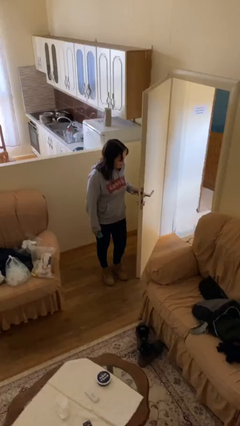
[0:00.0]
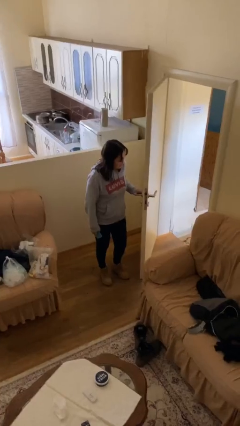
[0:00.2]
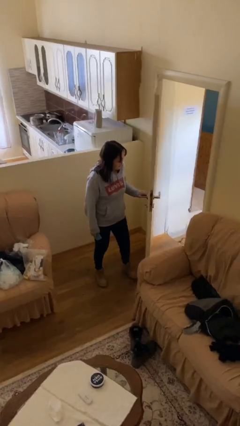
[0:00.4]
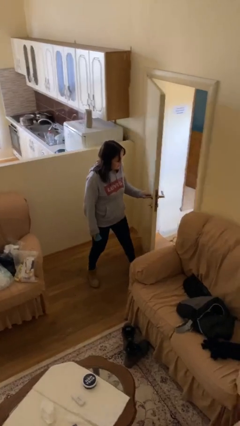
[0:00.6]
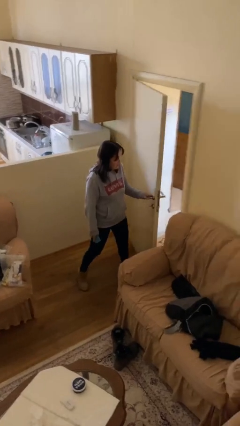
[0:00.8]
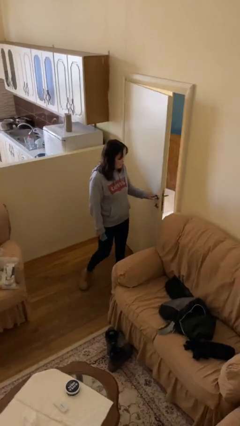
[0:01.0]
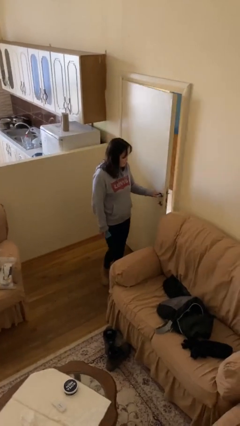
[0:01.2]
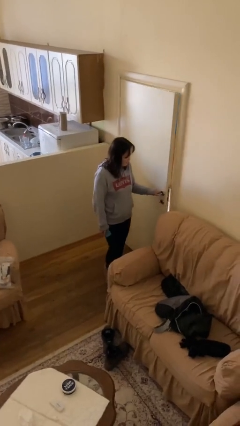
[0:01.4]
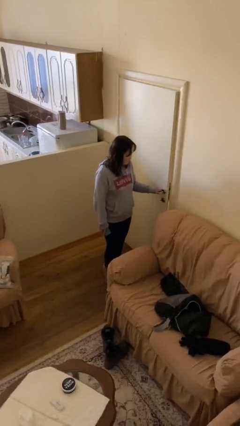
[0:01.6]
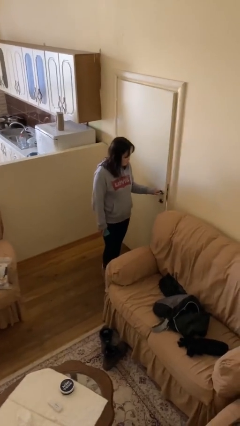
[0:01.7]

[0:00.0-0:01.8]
person closes facility door

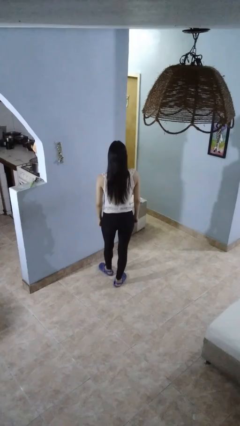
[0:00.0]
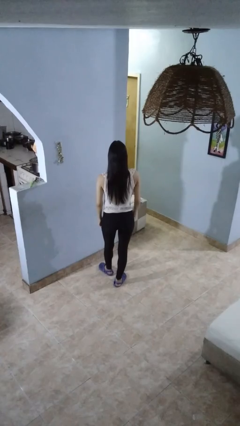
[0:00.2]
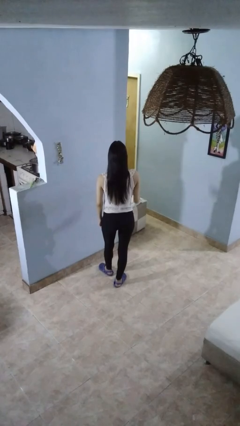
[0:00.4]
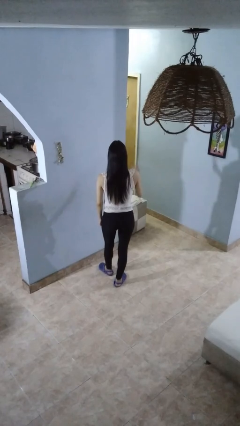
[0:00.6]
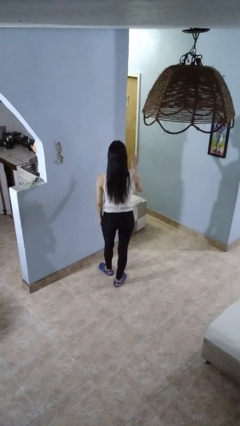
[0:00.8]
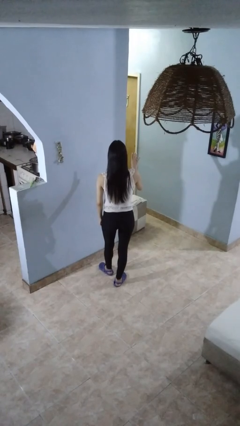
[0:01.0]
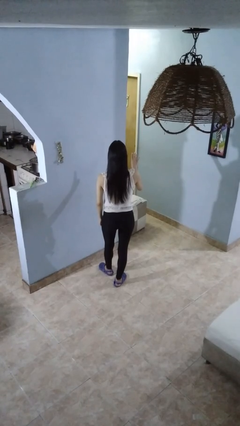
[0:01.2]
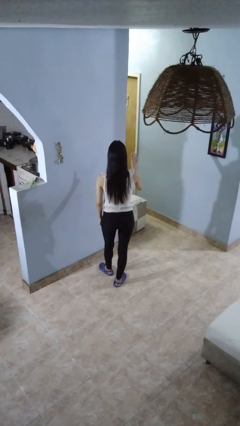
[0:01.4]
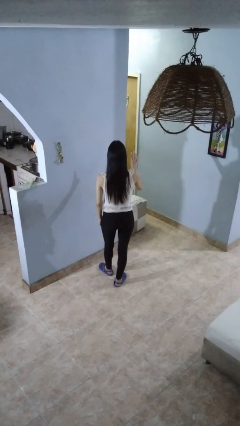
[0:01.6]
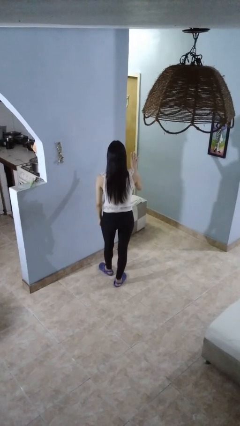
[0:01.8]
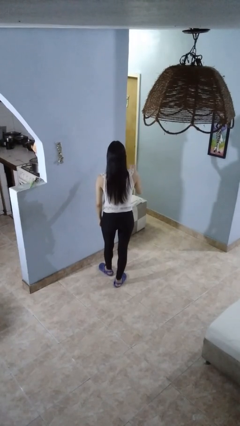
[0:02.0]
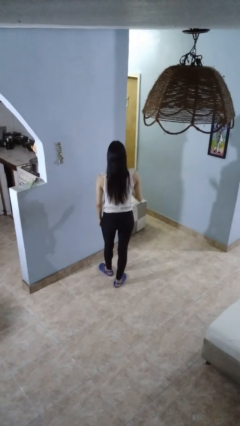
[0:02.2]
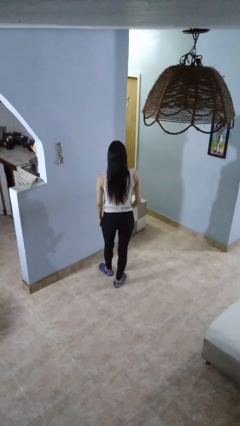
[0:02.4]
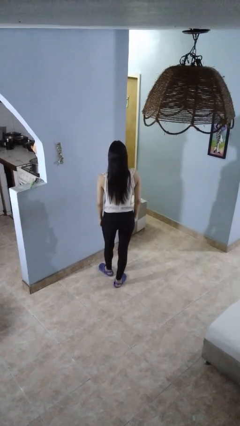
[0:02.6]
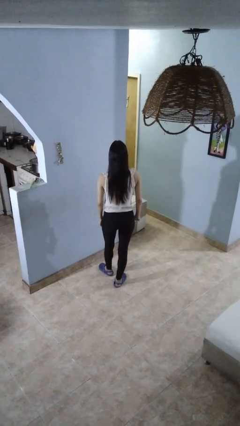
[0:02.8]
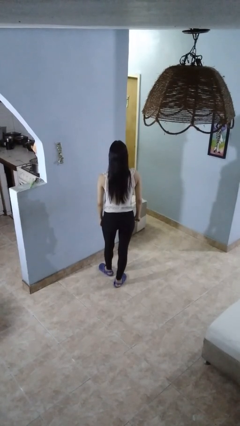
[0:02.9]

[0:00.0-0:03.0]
person gestures number four

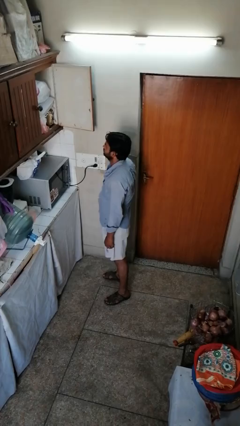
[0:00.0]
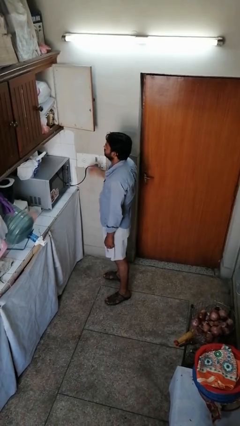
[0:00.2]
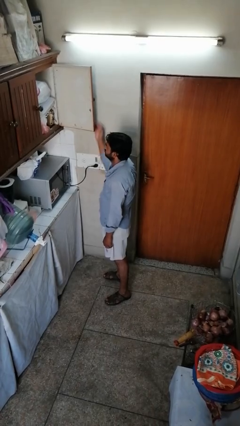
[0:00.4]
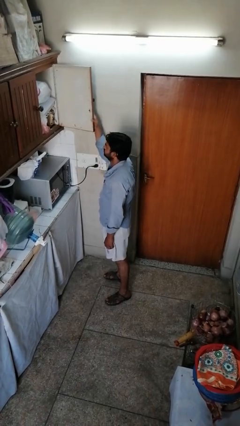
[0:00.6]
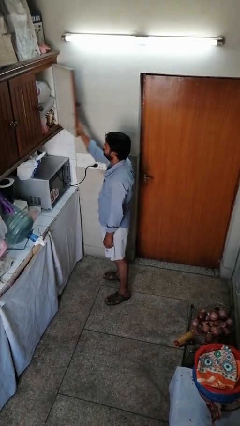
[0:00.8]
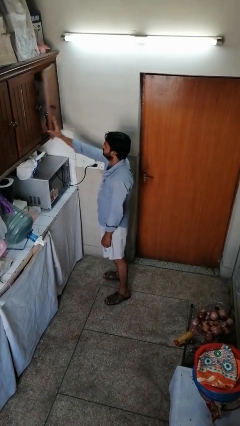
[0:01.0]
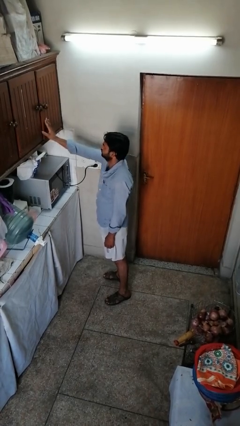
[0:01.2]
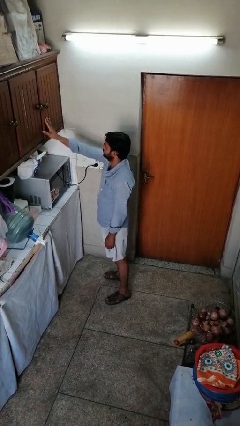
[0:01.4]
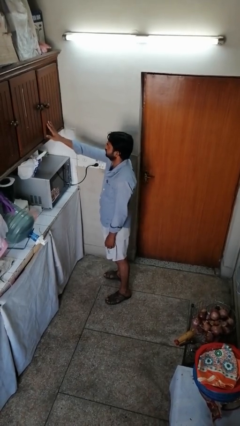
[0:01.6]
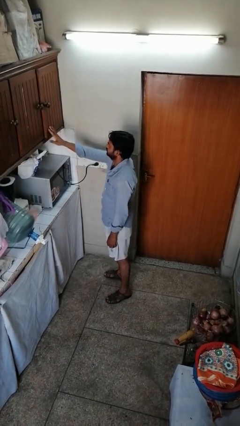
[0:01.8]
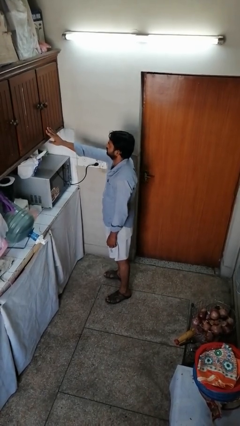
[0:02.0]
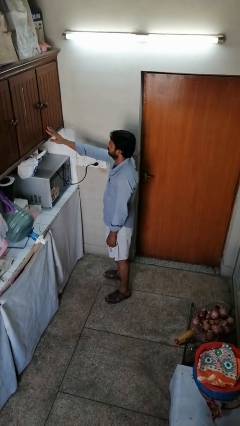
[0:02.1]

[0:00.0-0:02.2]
person closes cabinet

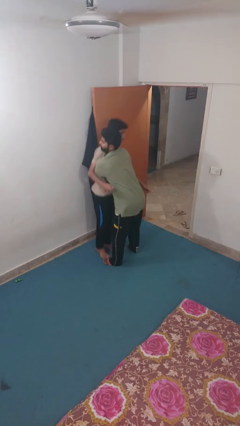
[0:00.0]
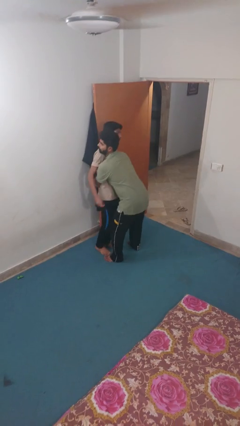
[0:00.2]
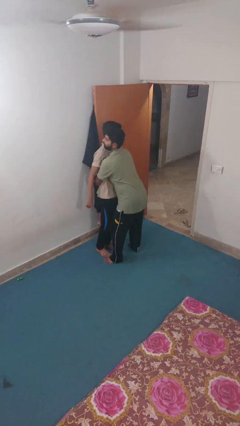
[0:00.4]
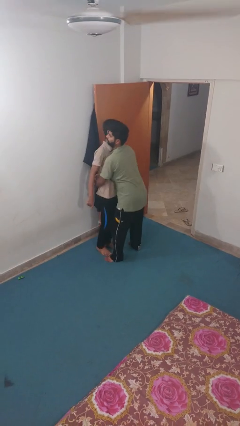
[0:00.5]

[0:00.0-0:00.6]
person puts down person

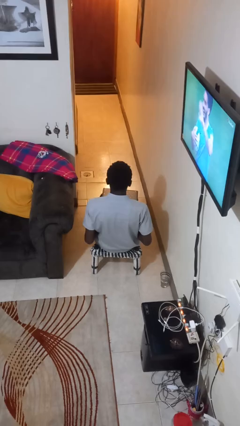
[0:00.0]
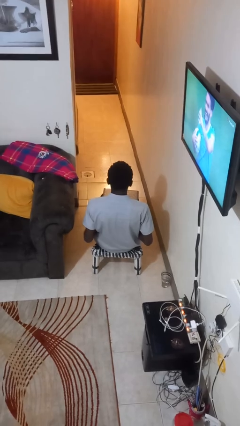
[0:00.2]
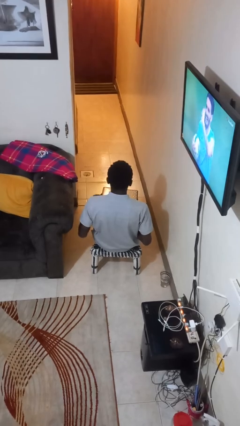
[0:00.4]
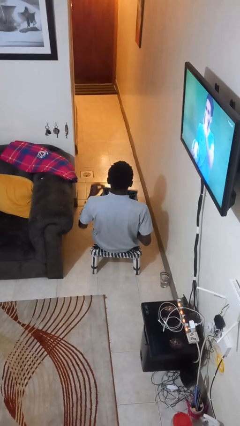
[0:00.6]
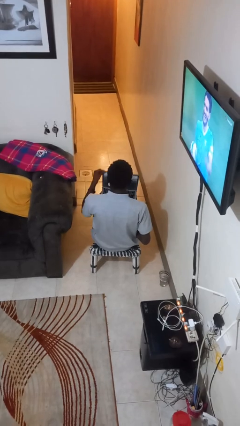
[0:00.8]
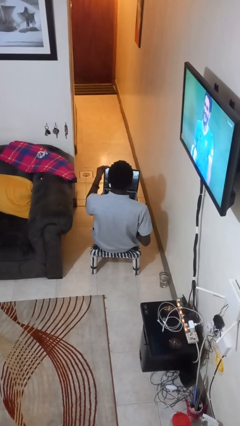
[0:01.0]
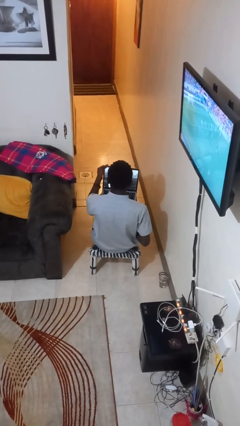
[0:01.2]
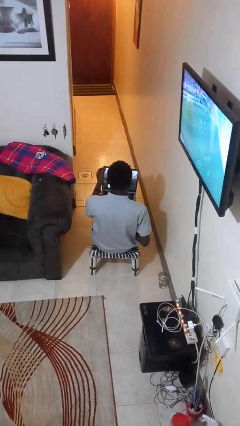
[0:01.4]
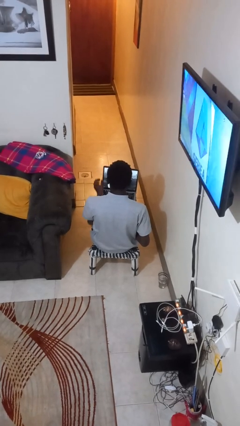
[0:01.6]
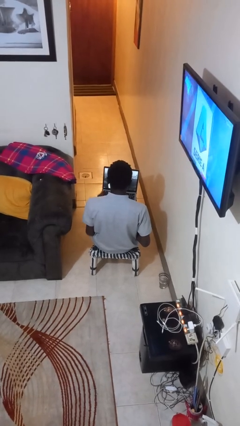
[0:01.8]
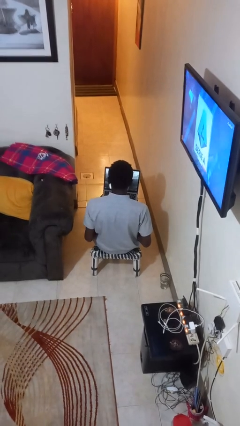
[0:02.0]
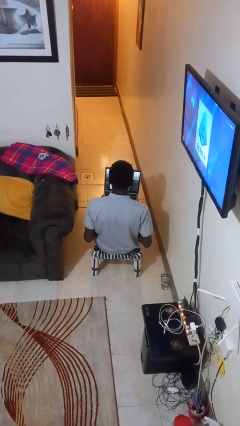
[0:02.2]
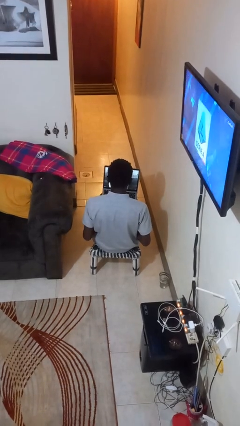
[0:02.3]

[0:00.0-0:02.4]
person opens laptop

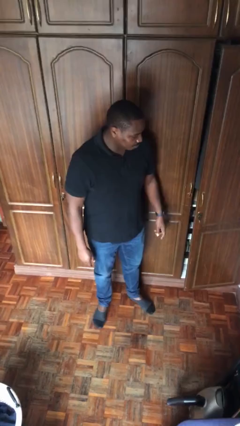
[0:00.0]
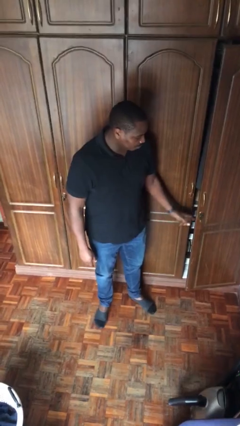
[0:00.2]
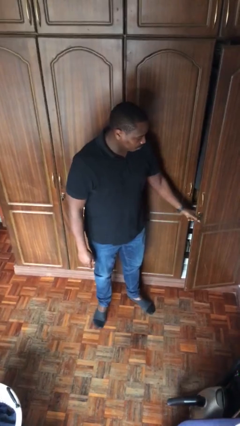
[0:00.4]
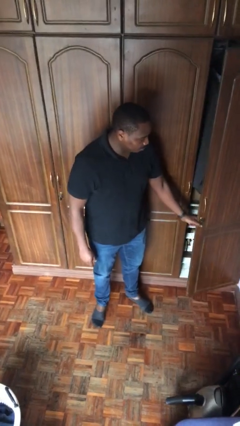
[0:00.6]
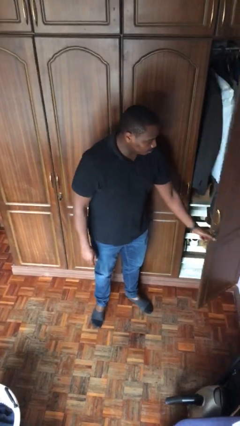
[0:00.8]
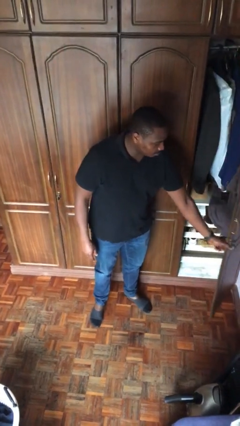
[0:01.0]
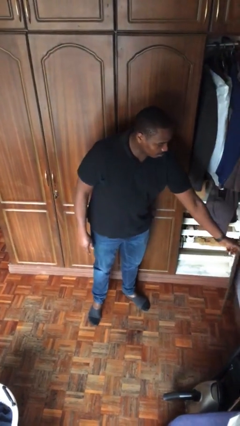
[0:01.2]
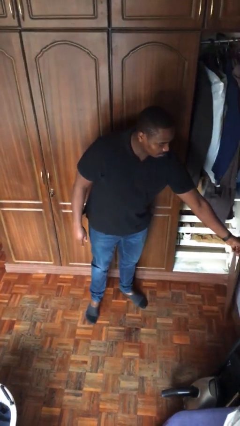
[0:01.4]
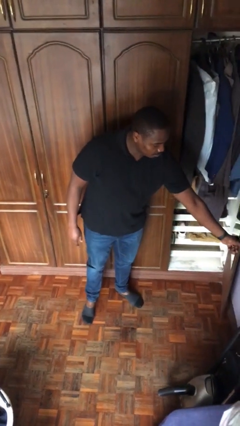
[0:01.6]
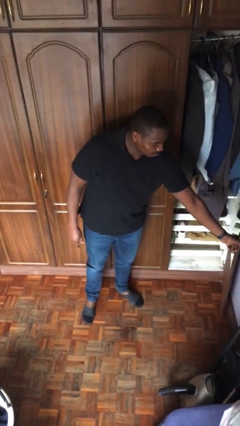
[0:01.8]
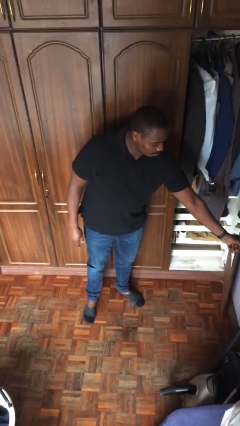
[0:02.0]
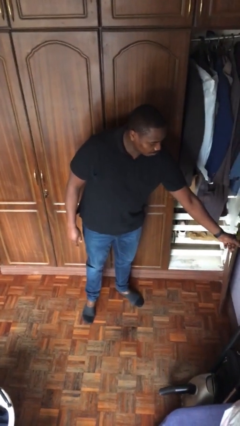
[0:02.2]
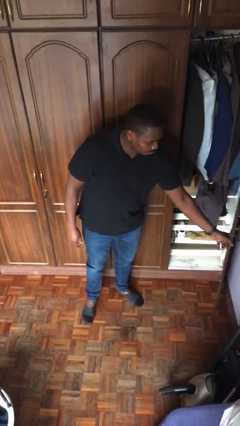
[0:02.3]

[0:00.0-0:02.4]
person opens closet door

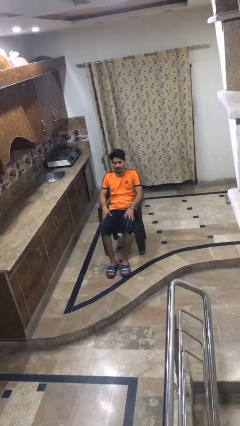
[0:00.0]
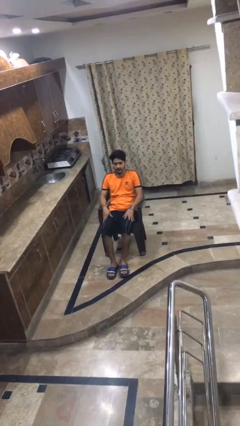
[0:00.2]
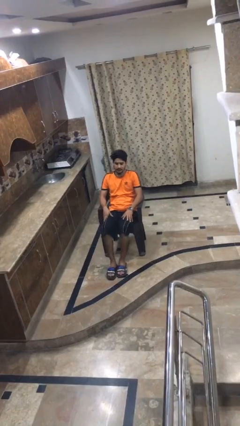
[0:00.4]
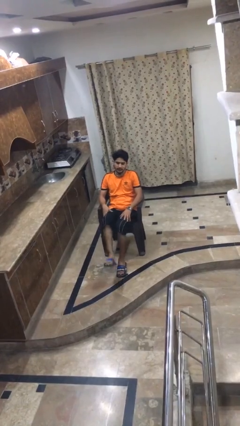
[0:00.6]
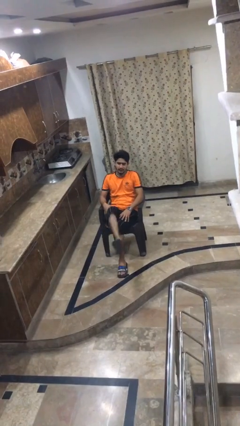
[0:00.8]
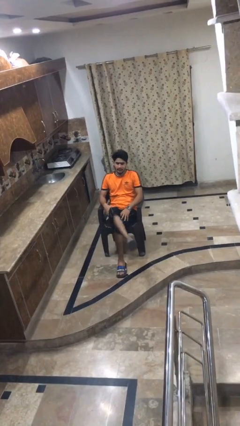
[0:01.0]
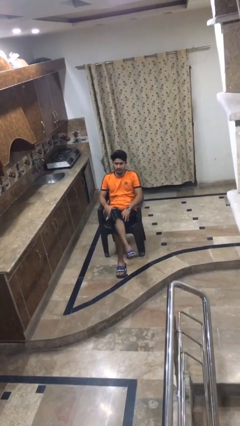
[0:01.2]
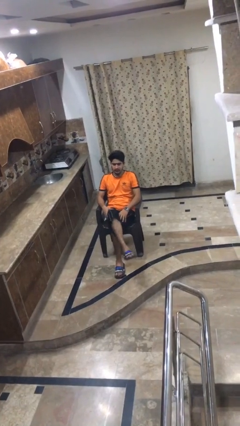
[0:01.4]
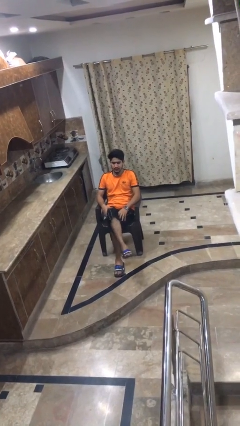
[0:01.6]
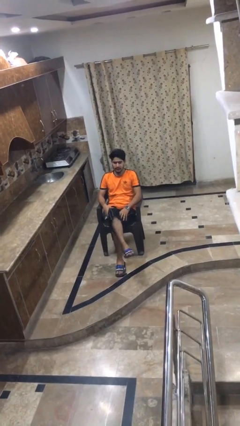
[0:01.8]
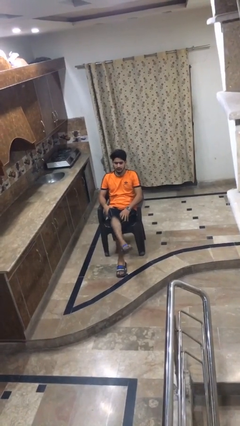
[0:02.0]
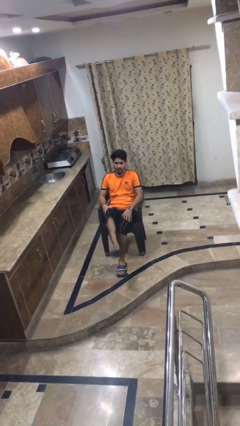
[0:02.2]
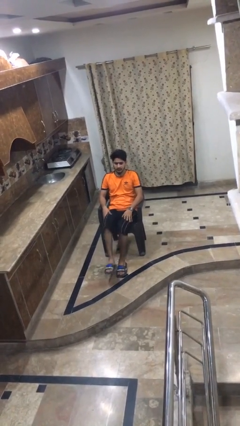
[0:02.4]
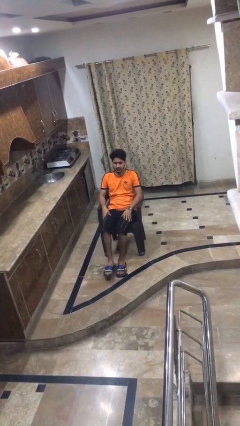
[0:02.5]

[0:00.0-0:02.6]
person crosses legs

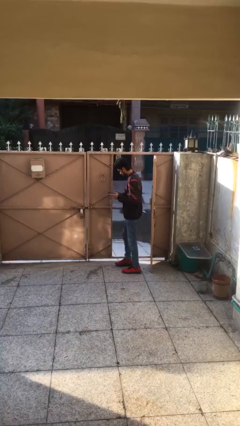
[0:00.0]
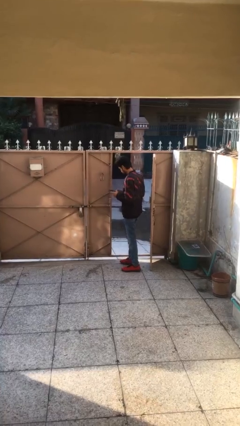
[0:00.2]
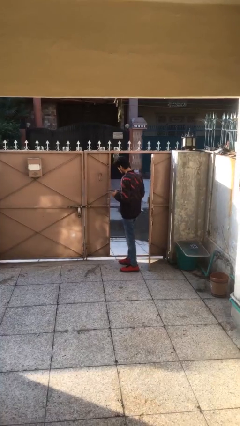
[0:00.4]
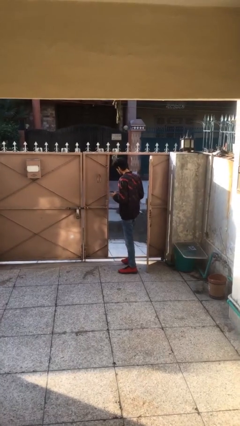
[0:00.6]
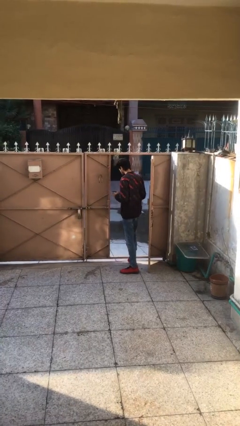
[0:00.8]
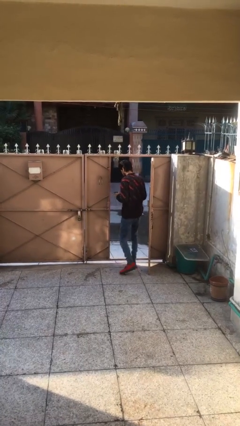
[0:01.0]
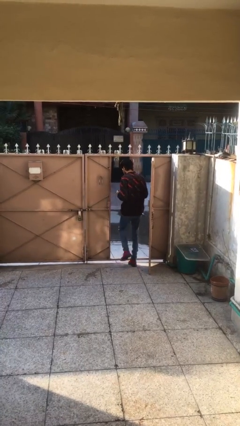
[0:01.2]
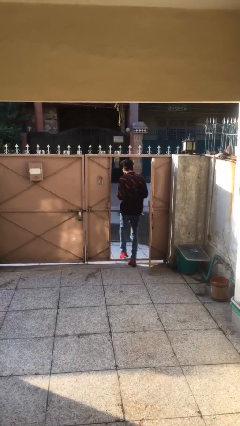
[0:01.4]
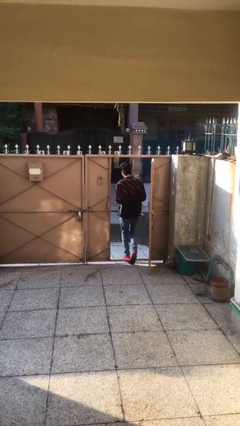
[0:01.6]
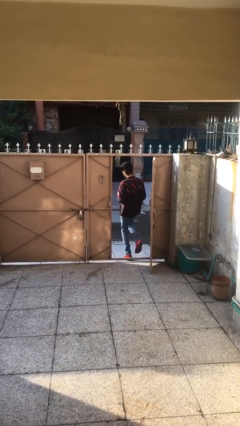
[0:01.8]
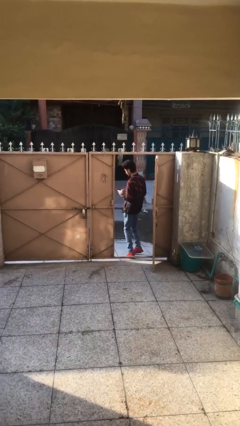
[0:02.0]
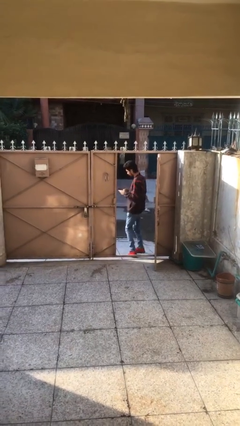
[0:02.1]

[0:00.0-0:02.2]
person exits scene through structure
